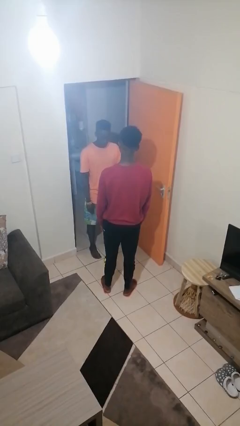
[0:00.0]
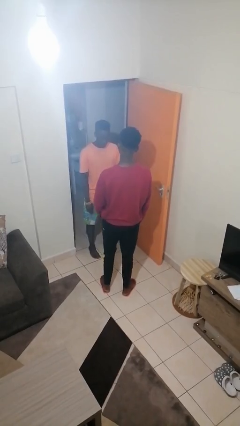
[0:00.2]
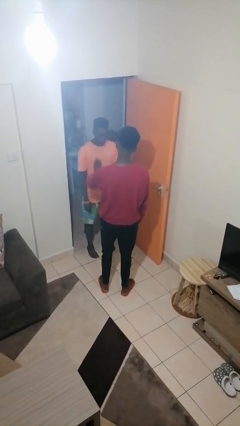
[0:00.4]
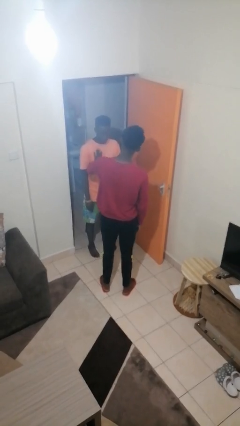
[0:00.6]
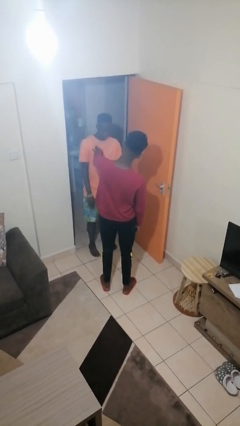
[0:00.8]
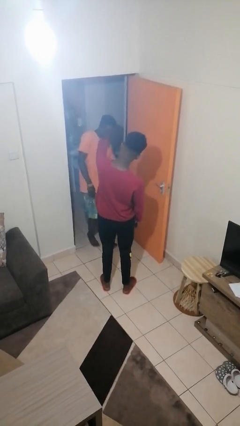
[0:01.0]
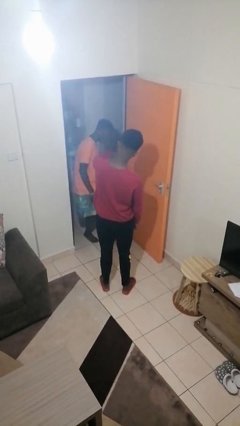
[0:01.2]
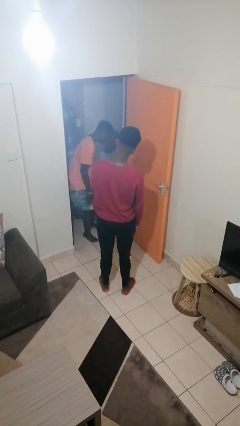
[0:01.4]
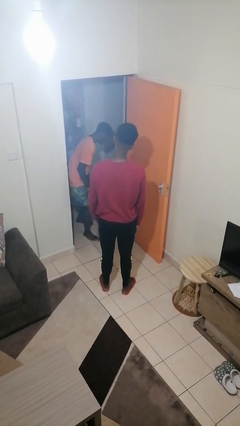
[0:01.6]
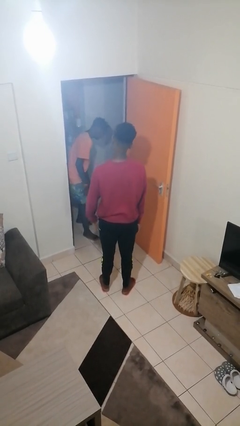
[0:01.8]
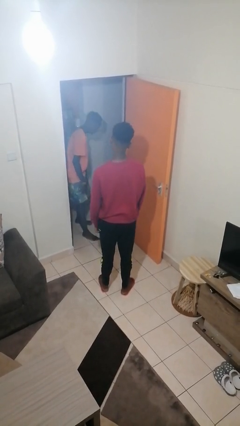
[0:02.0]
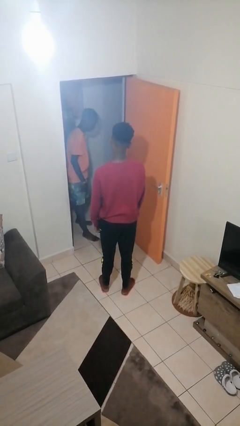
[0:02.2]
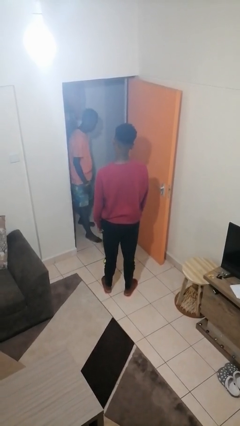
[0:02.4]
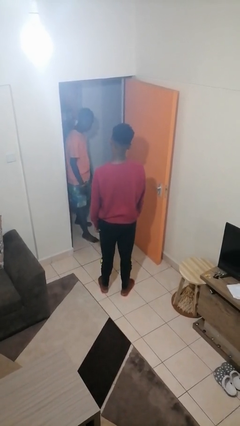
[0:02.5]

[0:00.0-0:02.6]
person shoves person

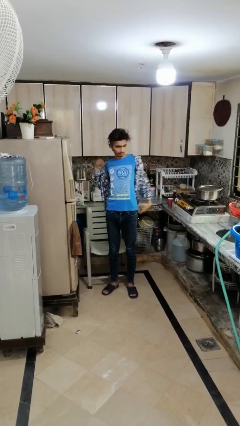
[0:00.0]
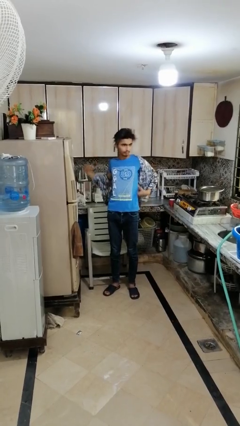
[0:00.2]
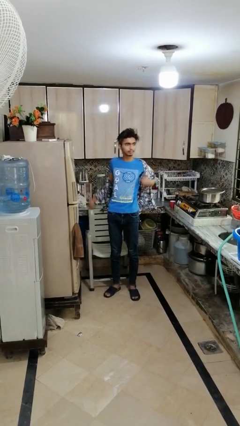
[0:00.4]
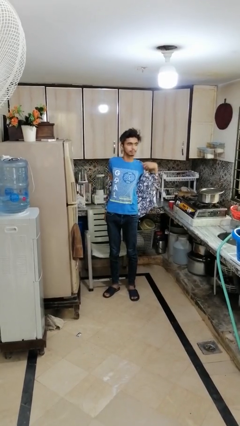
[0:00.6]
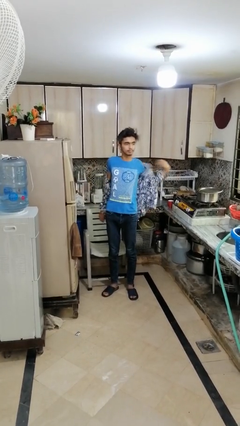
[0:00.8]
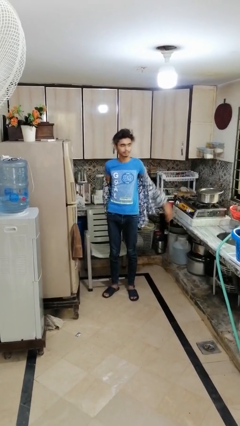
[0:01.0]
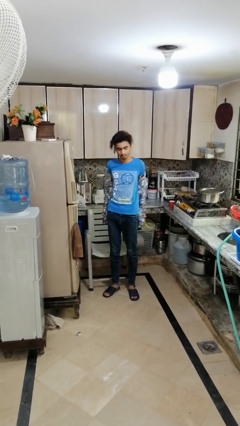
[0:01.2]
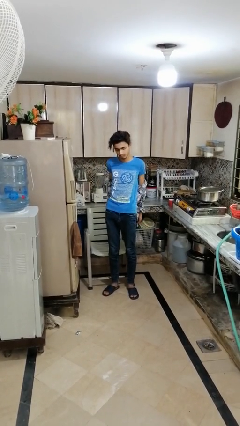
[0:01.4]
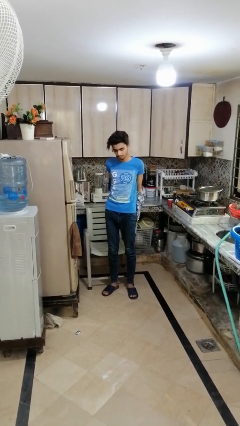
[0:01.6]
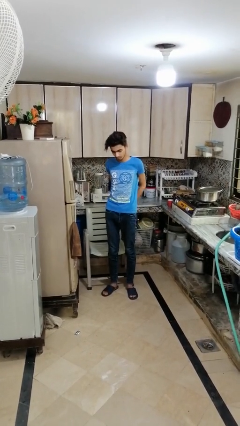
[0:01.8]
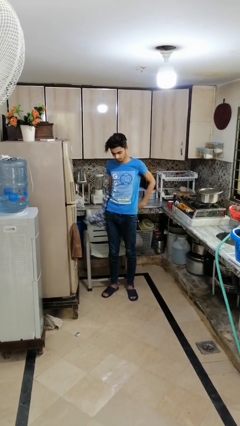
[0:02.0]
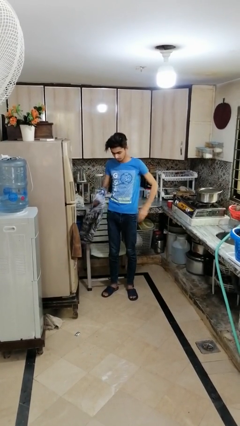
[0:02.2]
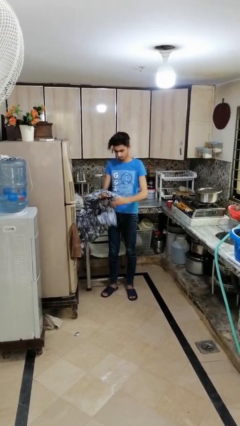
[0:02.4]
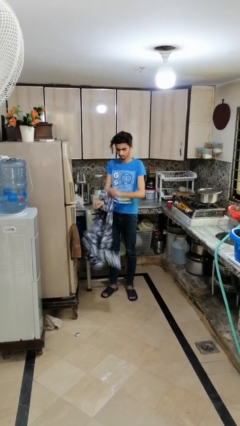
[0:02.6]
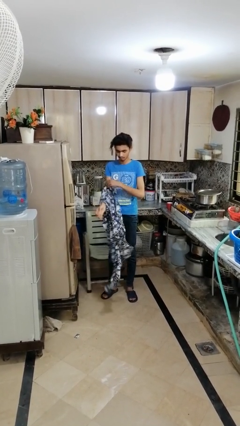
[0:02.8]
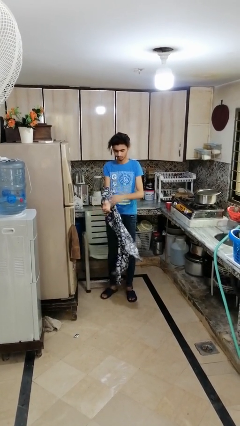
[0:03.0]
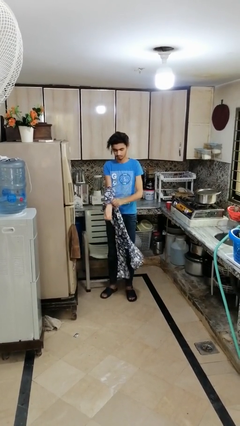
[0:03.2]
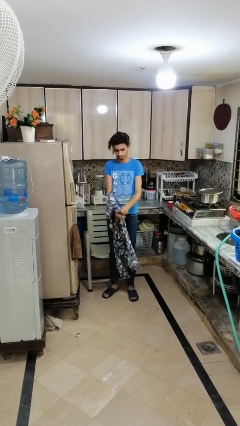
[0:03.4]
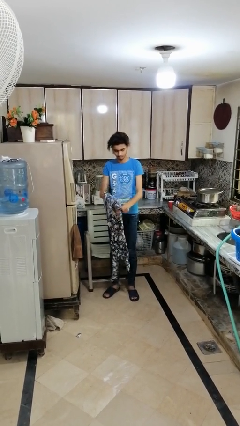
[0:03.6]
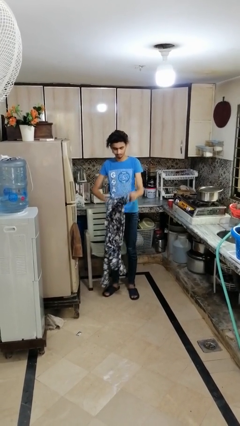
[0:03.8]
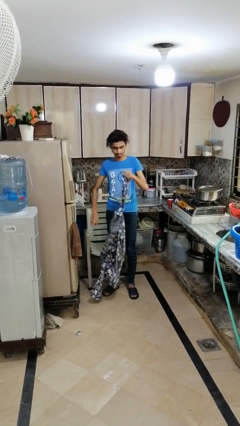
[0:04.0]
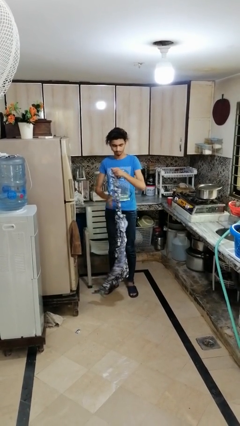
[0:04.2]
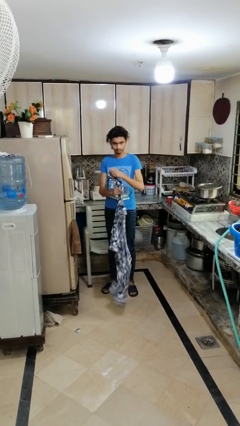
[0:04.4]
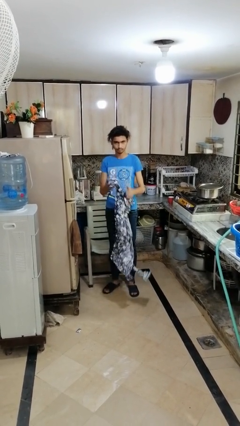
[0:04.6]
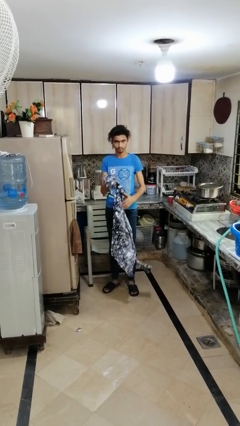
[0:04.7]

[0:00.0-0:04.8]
person takes off shirt

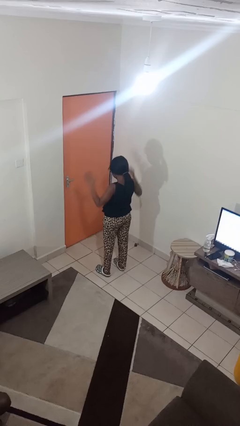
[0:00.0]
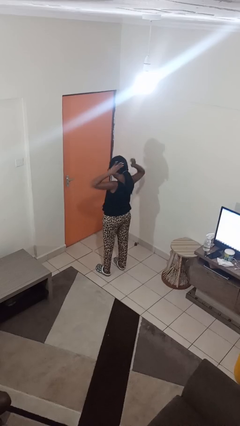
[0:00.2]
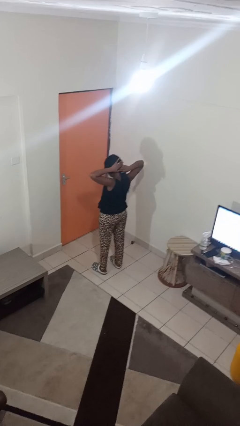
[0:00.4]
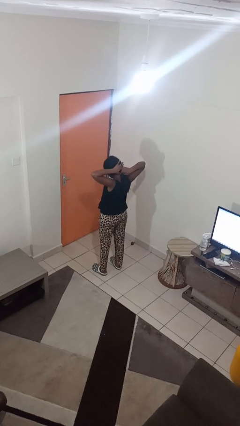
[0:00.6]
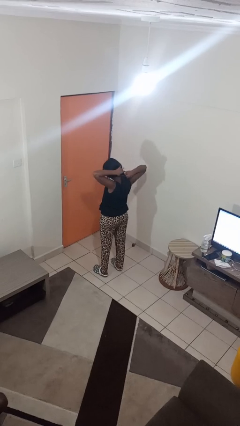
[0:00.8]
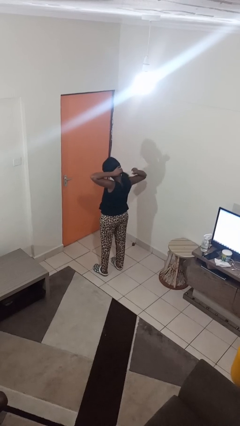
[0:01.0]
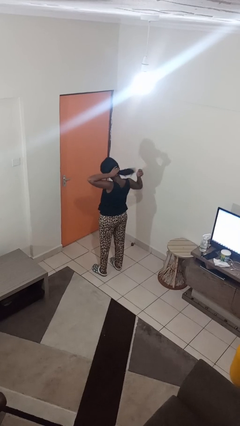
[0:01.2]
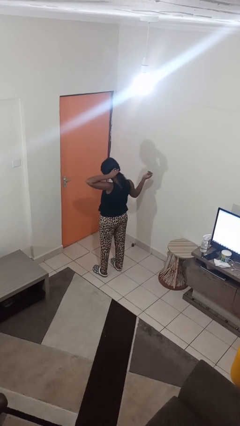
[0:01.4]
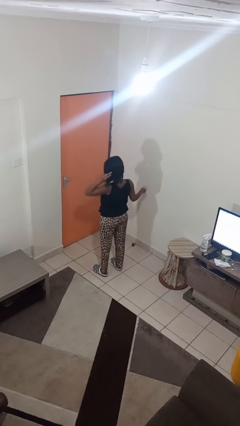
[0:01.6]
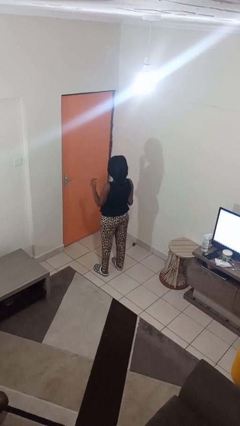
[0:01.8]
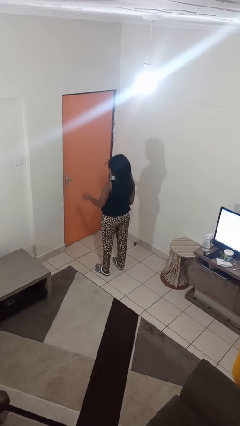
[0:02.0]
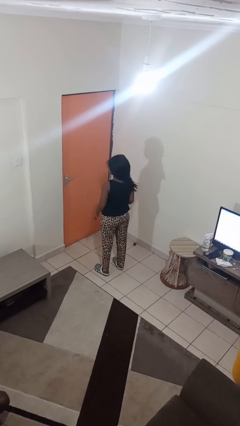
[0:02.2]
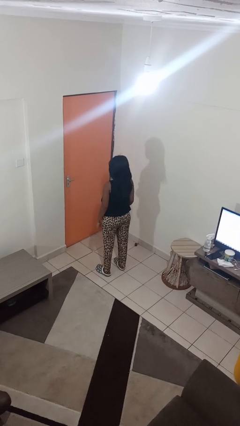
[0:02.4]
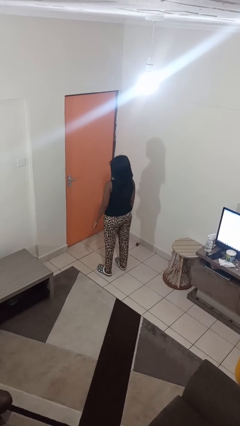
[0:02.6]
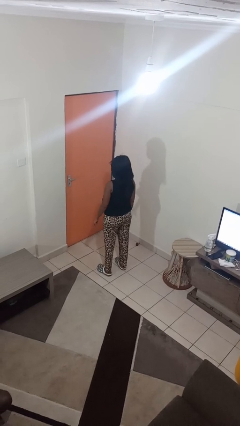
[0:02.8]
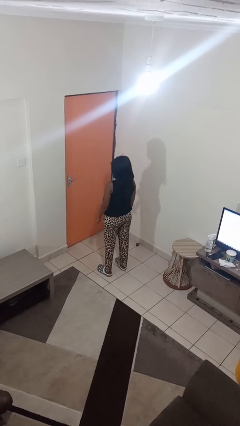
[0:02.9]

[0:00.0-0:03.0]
person takes off hairtie

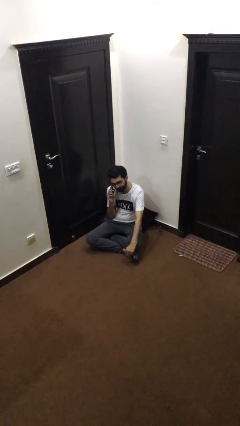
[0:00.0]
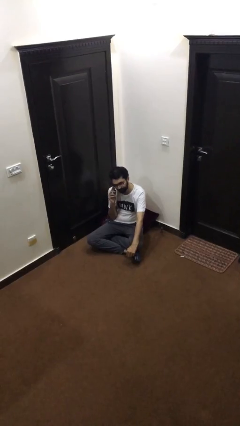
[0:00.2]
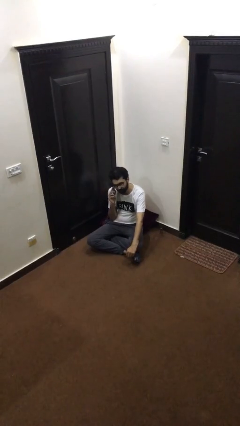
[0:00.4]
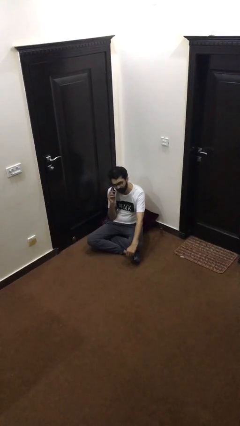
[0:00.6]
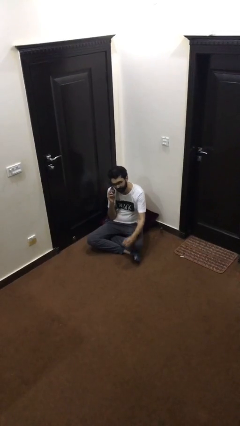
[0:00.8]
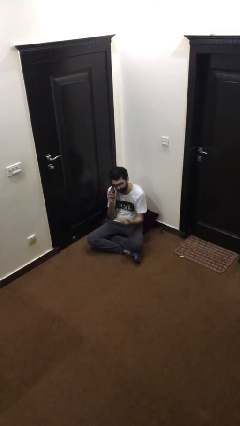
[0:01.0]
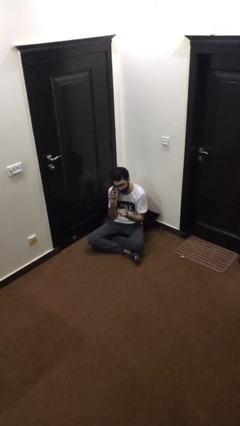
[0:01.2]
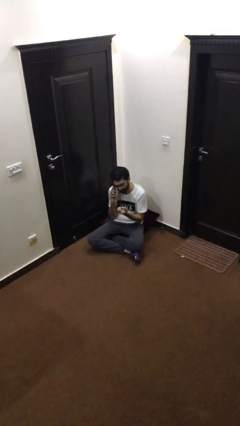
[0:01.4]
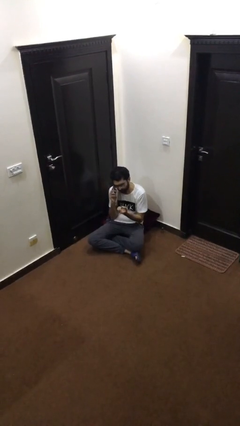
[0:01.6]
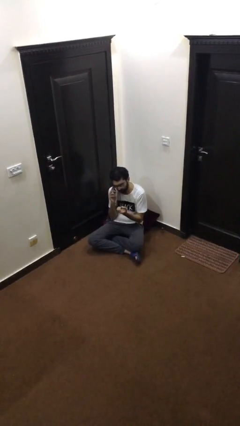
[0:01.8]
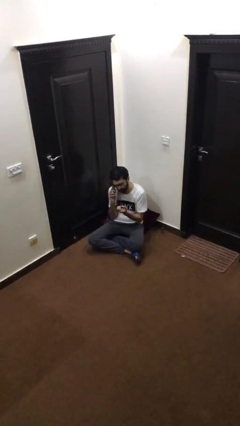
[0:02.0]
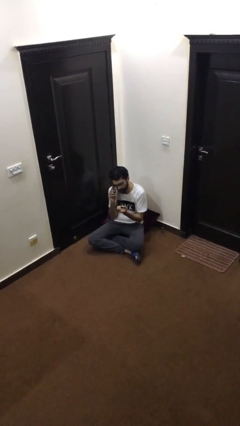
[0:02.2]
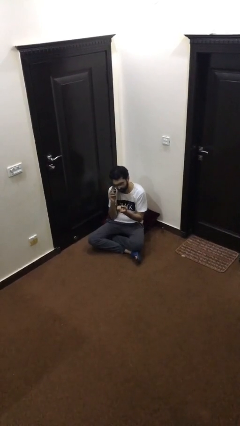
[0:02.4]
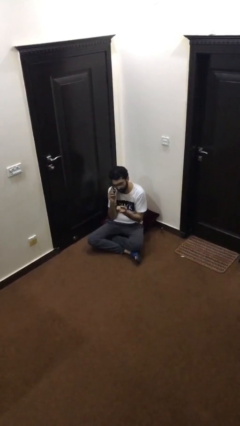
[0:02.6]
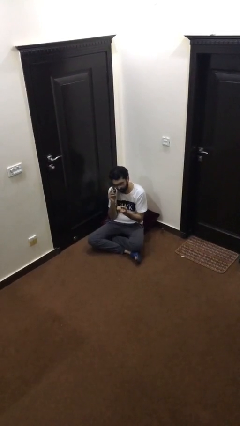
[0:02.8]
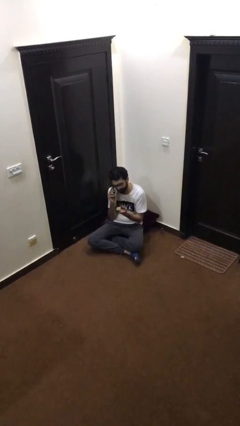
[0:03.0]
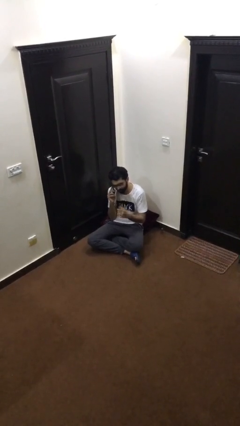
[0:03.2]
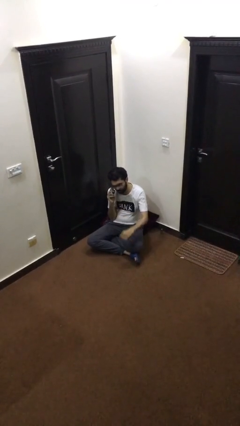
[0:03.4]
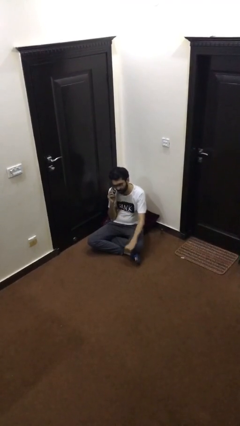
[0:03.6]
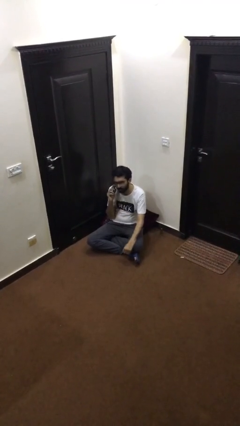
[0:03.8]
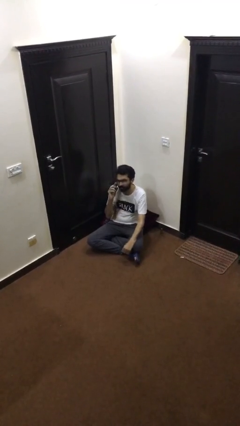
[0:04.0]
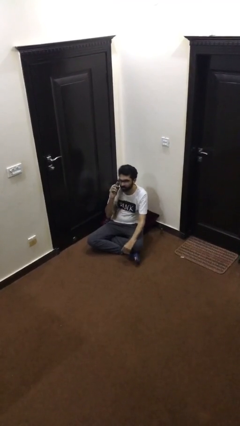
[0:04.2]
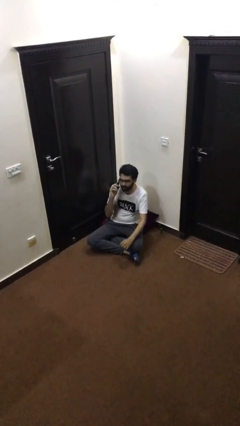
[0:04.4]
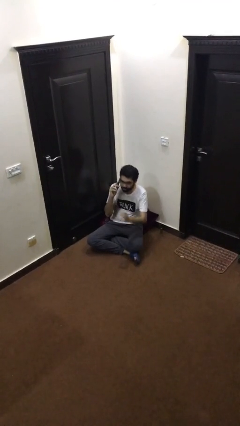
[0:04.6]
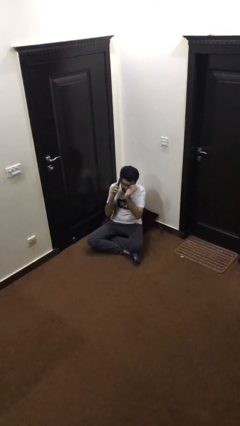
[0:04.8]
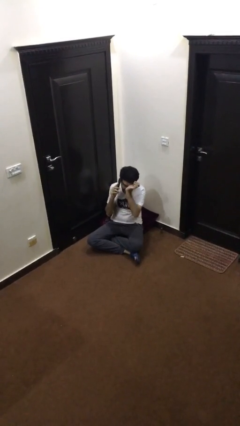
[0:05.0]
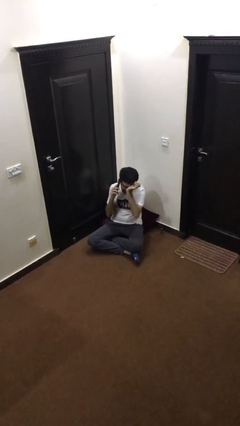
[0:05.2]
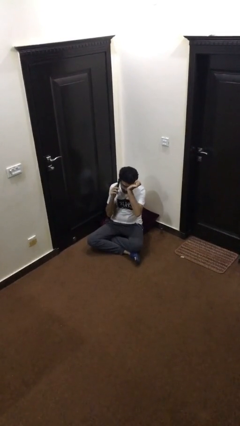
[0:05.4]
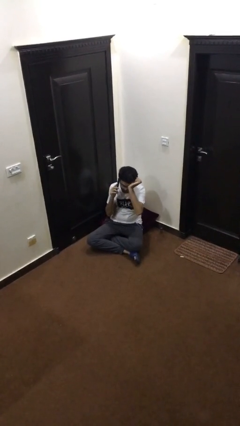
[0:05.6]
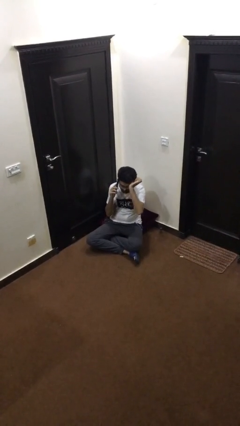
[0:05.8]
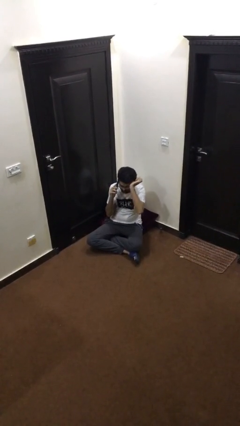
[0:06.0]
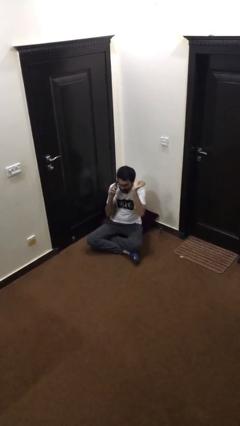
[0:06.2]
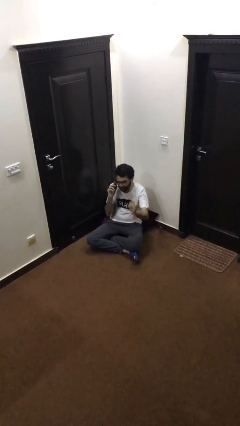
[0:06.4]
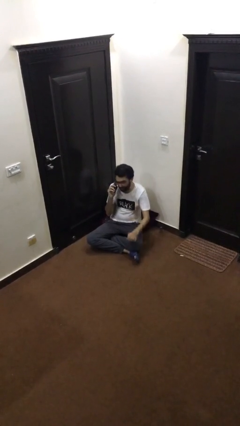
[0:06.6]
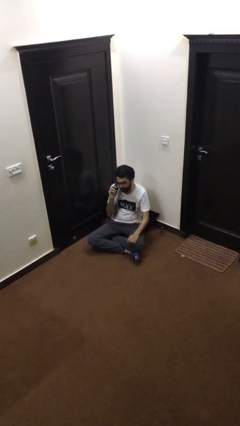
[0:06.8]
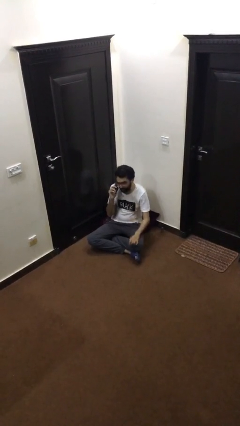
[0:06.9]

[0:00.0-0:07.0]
person talks on phone

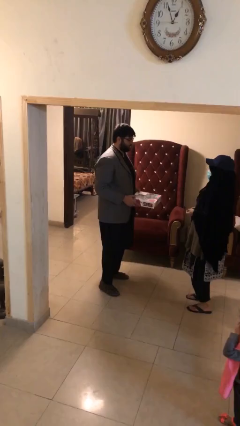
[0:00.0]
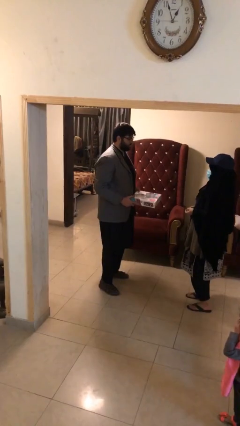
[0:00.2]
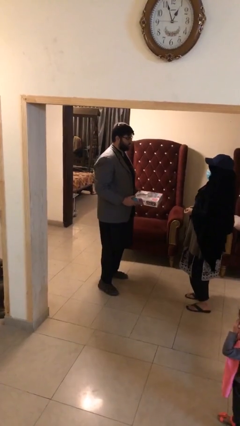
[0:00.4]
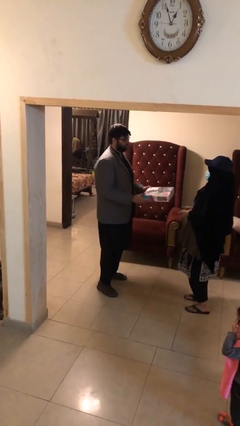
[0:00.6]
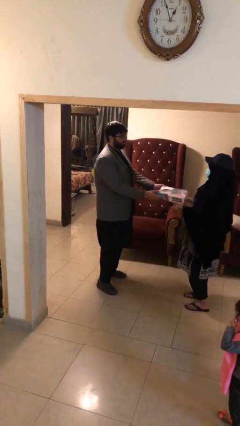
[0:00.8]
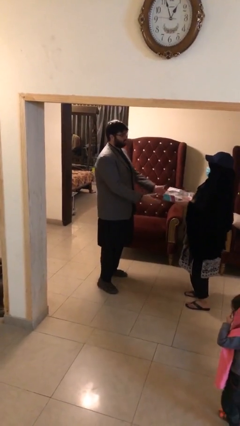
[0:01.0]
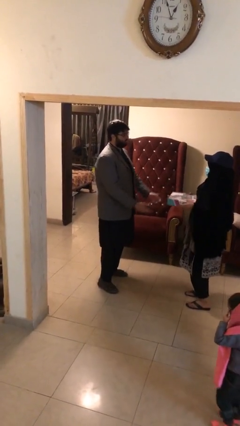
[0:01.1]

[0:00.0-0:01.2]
person transfers object to person
